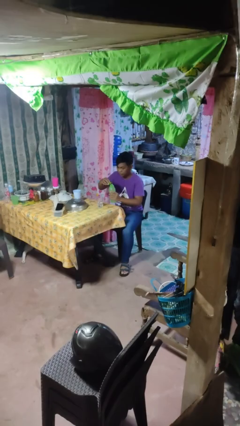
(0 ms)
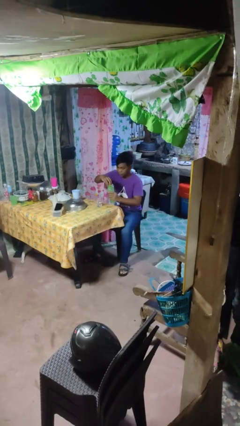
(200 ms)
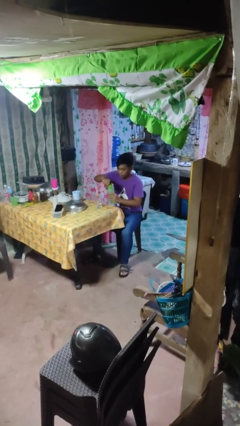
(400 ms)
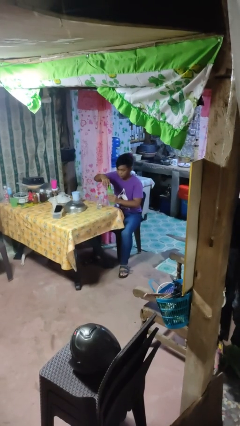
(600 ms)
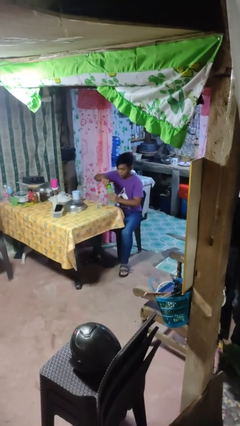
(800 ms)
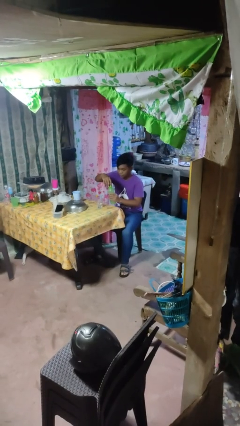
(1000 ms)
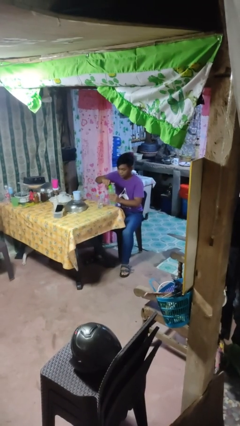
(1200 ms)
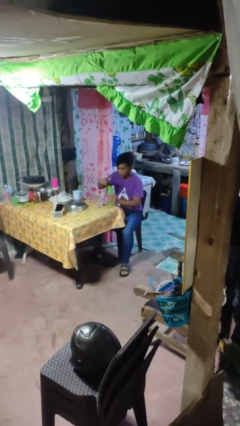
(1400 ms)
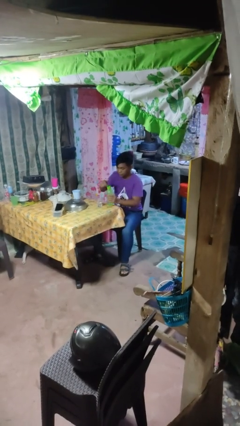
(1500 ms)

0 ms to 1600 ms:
person screws lid to bottle

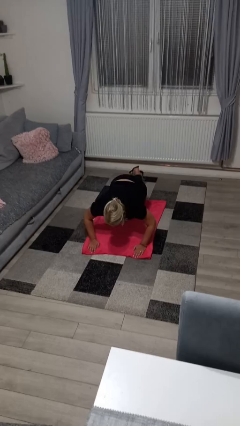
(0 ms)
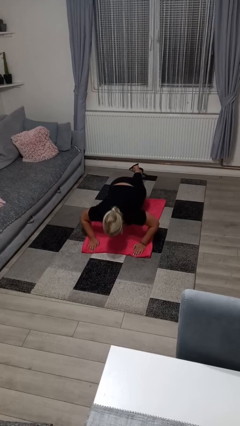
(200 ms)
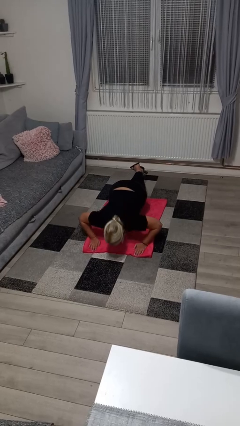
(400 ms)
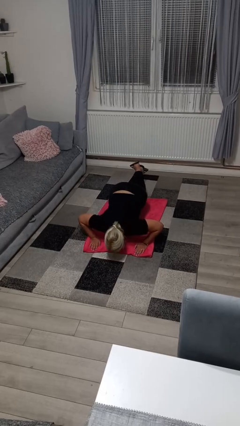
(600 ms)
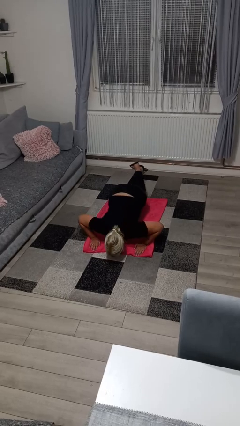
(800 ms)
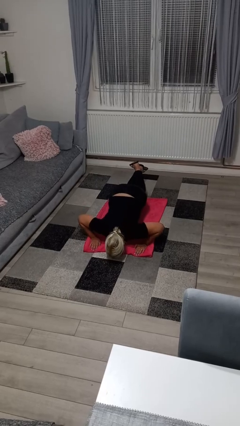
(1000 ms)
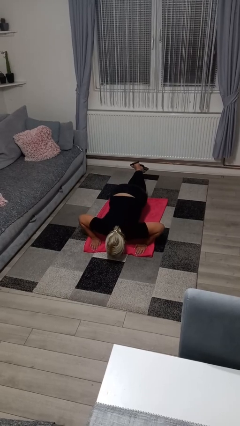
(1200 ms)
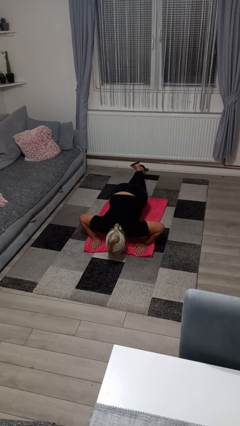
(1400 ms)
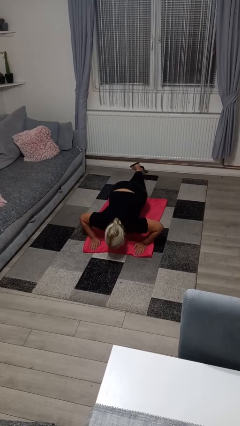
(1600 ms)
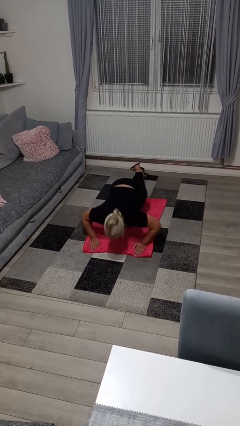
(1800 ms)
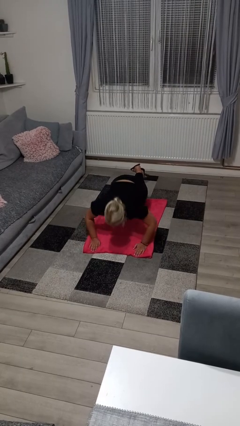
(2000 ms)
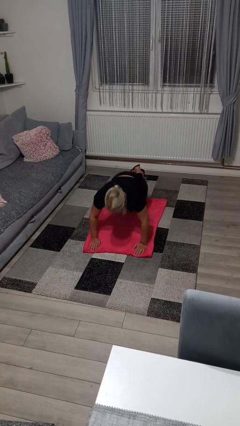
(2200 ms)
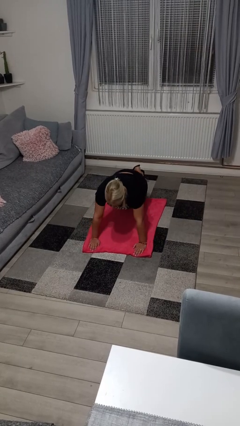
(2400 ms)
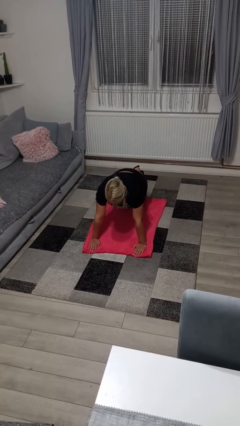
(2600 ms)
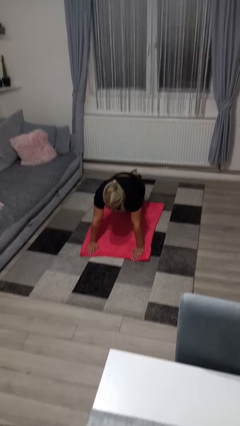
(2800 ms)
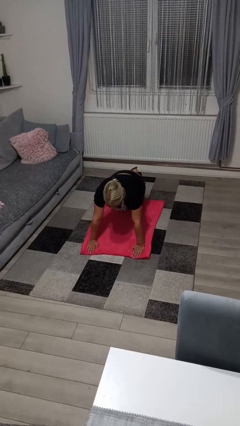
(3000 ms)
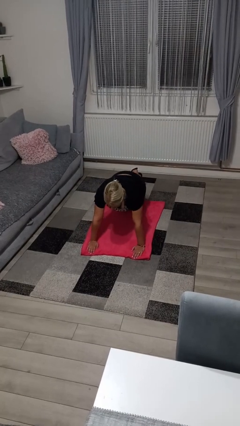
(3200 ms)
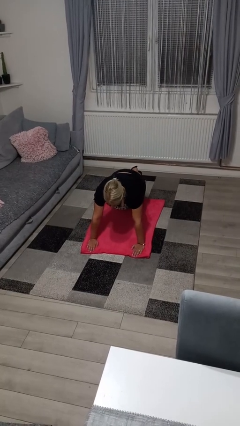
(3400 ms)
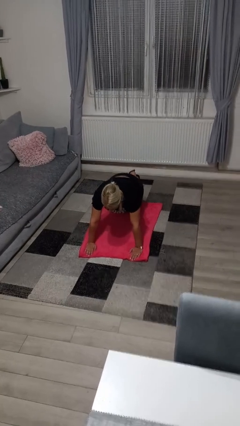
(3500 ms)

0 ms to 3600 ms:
person exercises with pushup

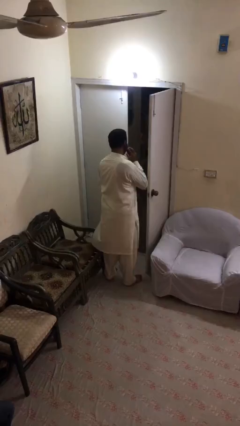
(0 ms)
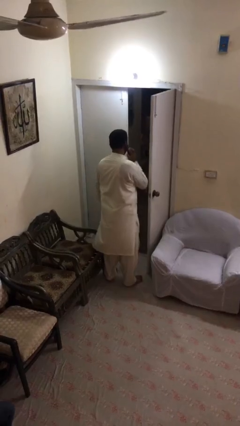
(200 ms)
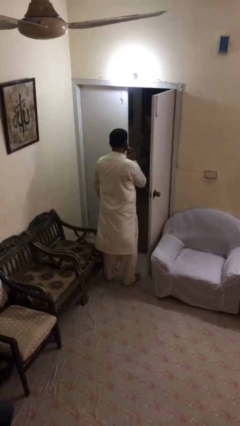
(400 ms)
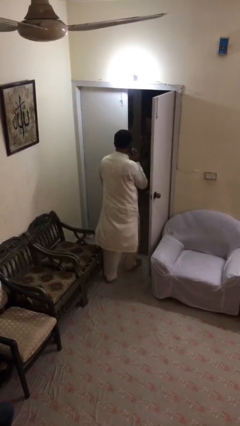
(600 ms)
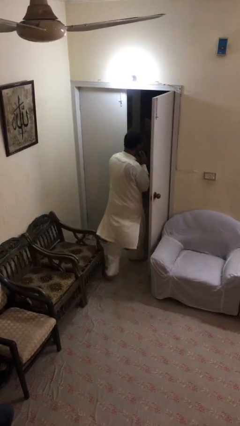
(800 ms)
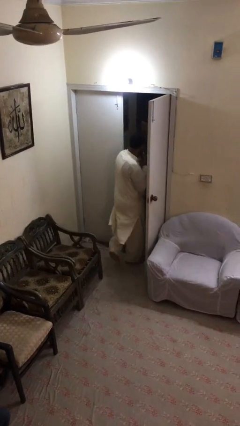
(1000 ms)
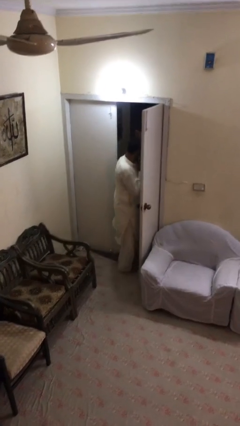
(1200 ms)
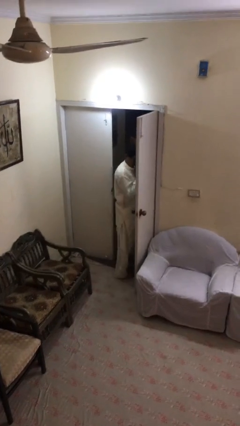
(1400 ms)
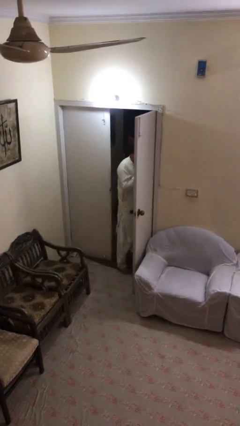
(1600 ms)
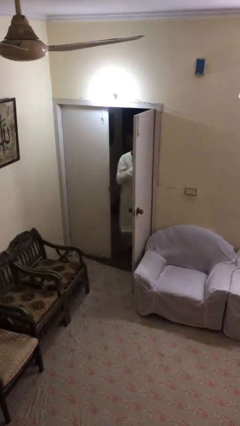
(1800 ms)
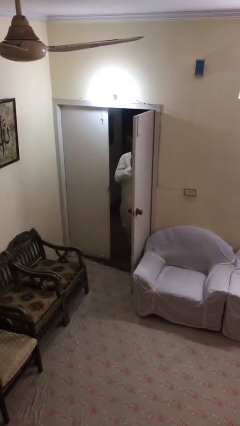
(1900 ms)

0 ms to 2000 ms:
person exits scene through structure

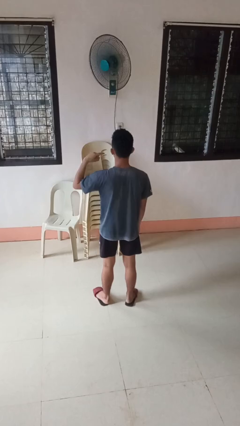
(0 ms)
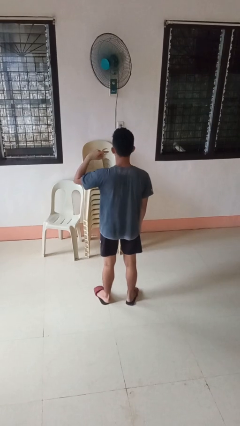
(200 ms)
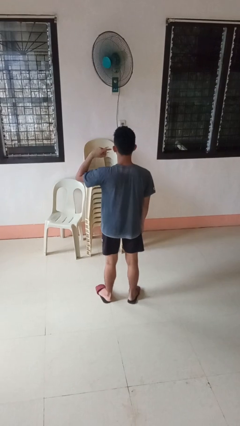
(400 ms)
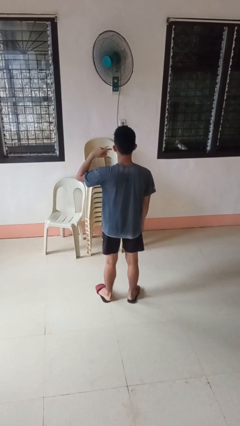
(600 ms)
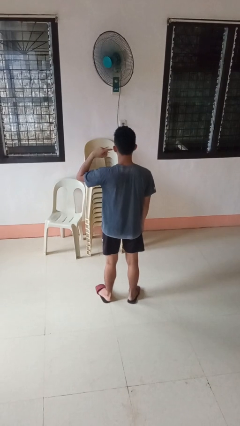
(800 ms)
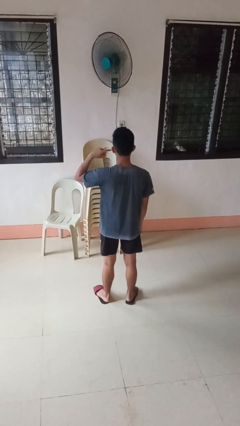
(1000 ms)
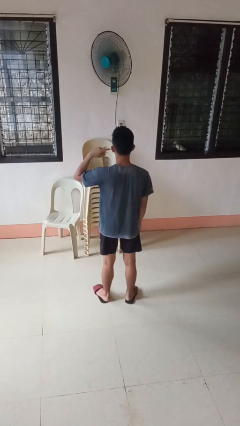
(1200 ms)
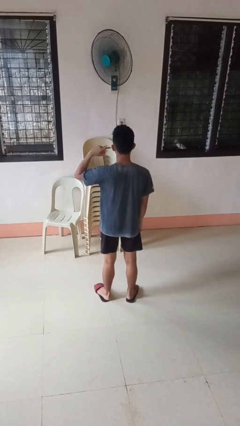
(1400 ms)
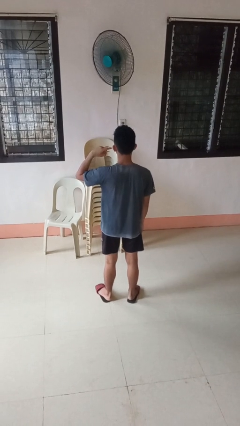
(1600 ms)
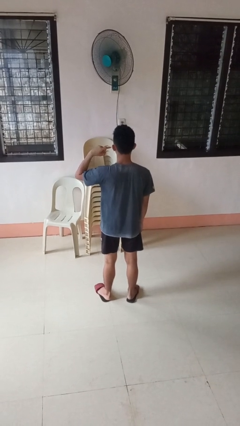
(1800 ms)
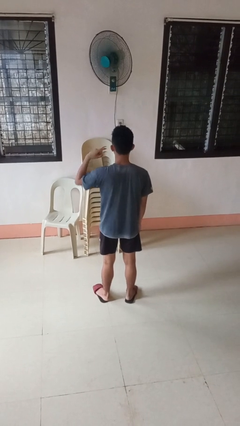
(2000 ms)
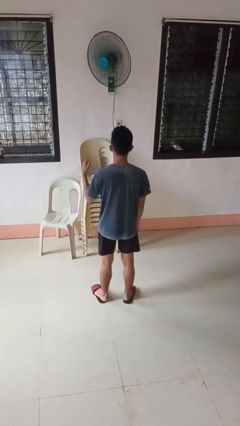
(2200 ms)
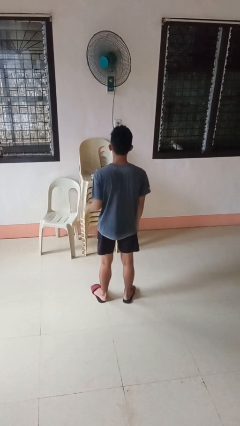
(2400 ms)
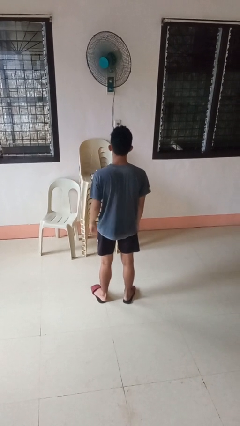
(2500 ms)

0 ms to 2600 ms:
person gestures listen closely

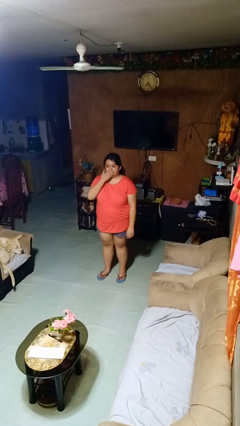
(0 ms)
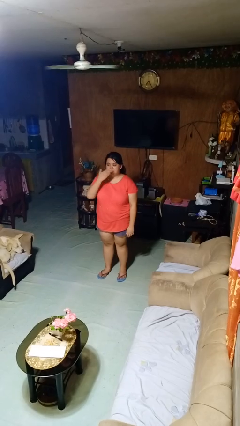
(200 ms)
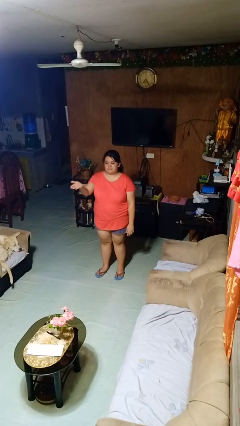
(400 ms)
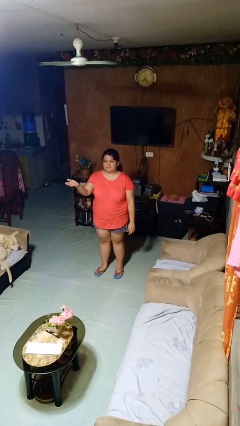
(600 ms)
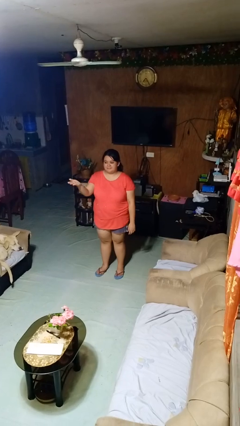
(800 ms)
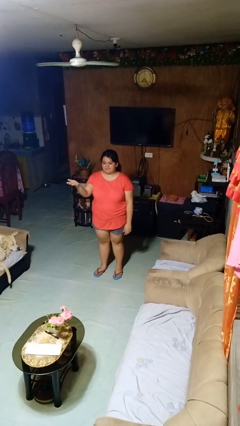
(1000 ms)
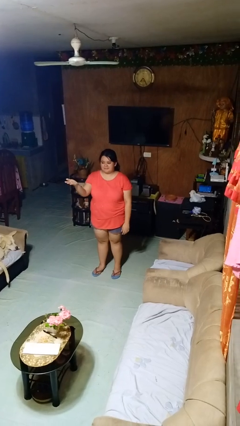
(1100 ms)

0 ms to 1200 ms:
person gestures blow kiss

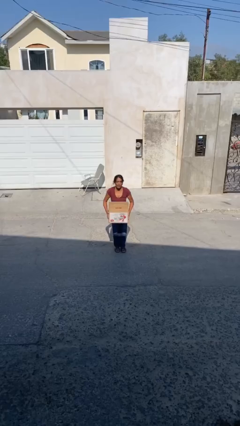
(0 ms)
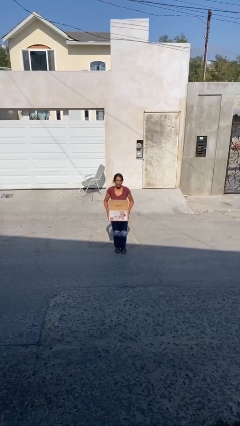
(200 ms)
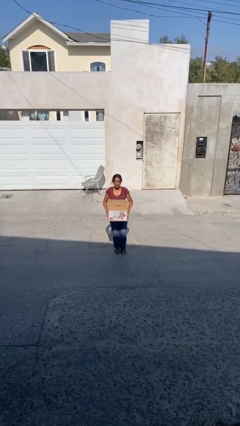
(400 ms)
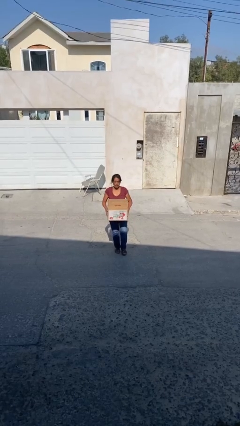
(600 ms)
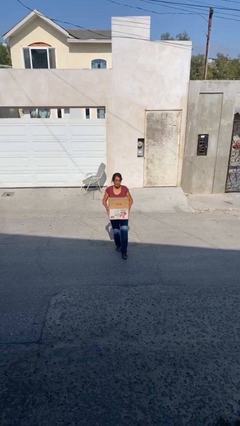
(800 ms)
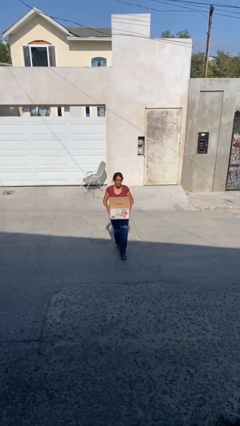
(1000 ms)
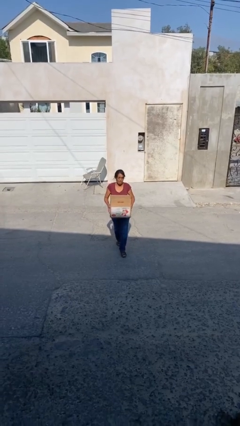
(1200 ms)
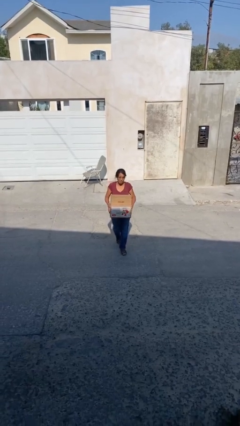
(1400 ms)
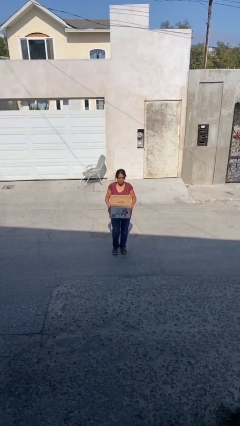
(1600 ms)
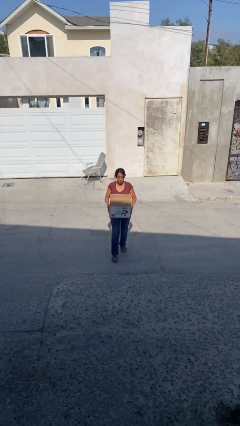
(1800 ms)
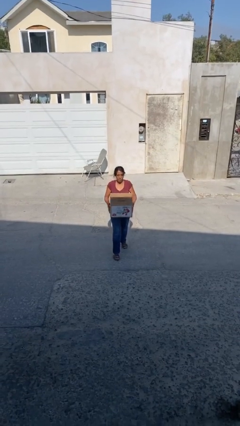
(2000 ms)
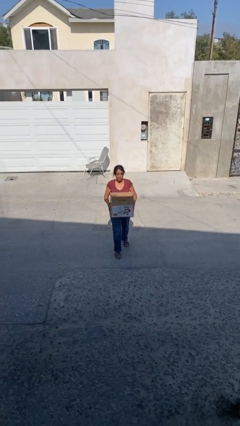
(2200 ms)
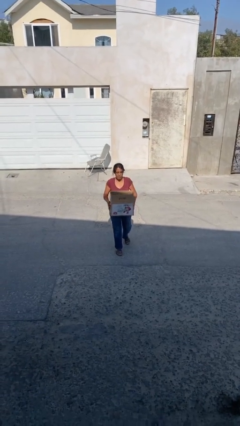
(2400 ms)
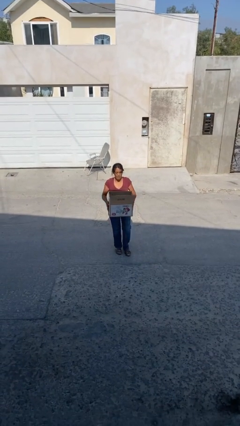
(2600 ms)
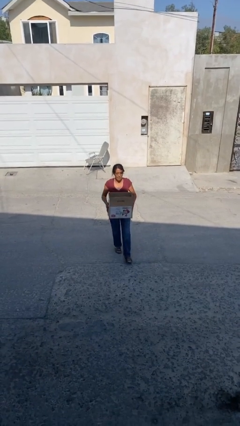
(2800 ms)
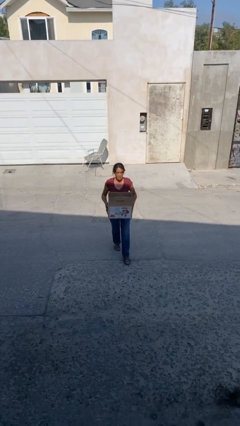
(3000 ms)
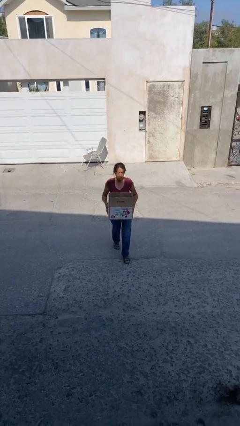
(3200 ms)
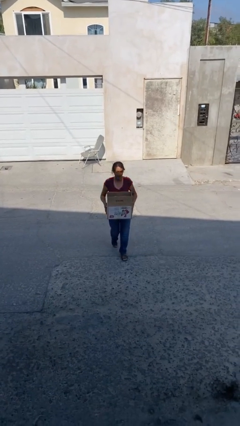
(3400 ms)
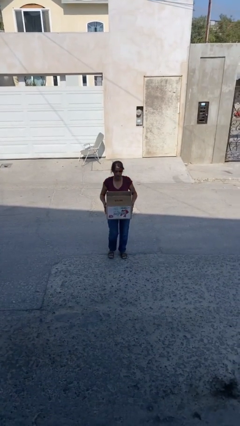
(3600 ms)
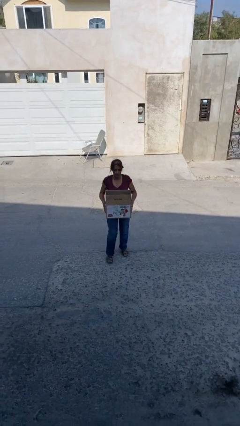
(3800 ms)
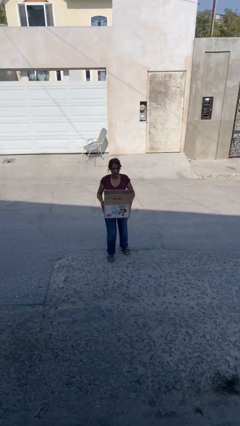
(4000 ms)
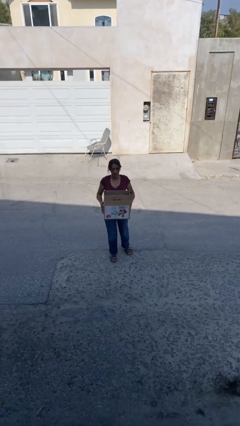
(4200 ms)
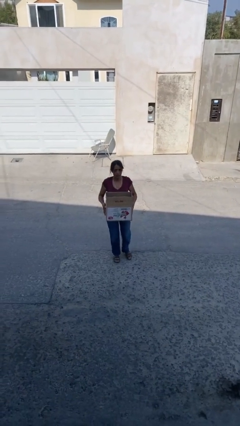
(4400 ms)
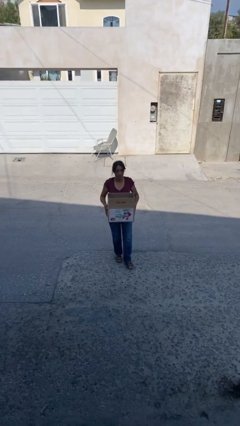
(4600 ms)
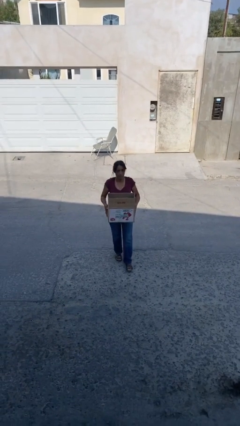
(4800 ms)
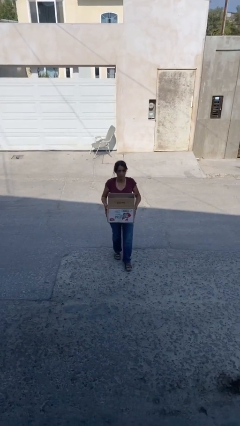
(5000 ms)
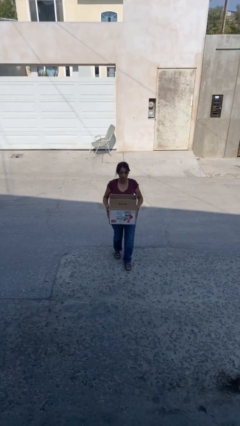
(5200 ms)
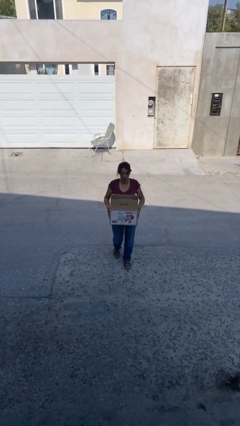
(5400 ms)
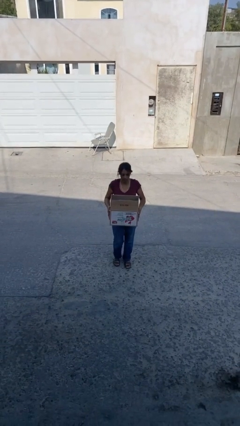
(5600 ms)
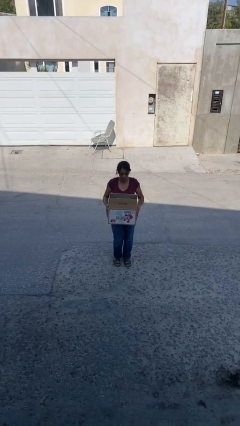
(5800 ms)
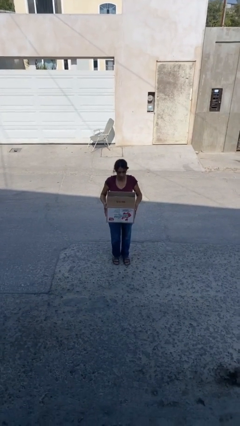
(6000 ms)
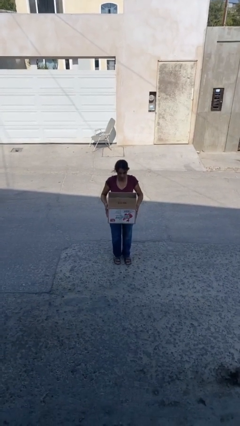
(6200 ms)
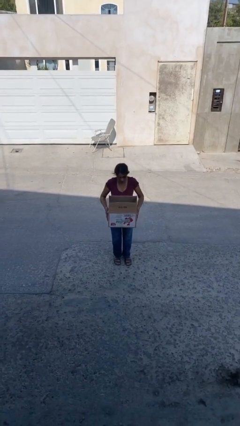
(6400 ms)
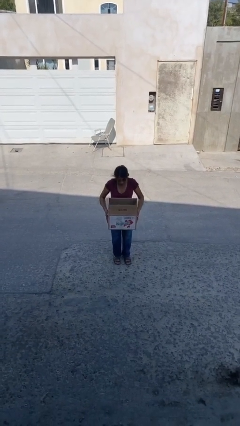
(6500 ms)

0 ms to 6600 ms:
person carries heavy object
